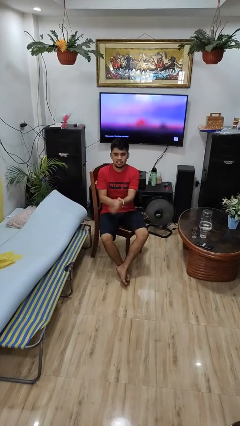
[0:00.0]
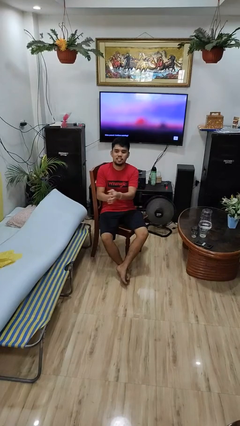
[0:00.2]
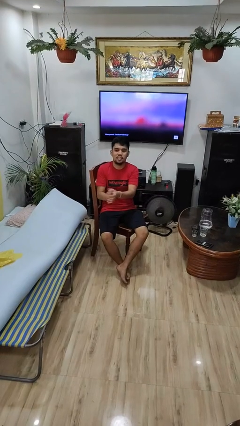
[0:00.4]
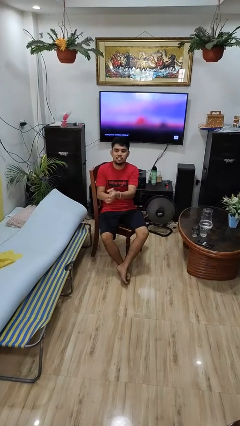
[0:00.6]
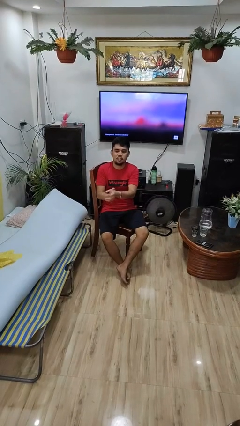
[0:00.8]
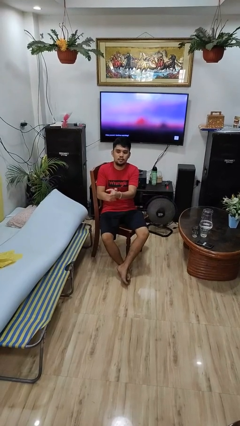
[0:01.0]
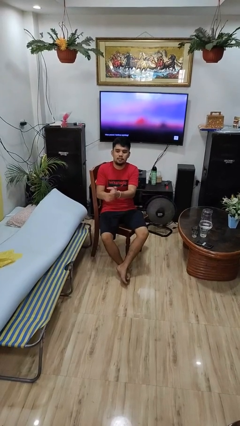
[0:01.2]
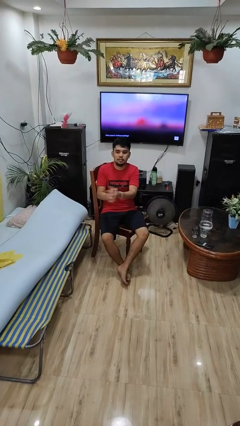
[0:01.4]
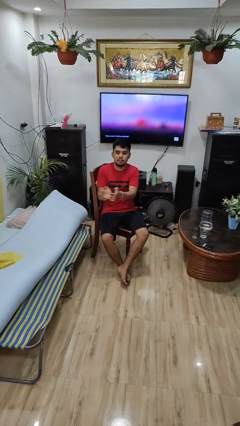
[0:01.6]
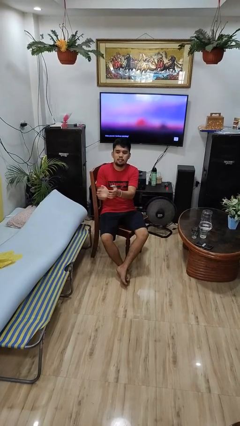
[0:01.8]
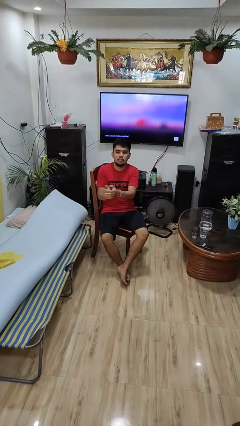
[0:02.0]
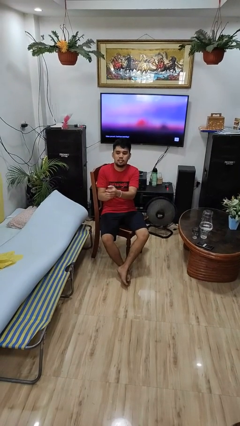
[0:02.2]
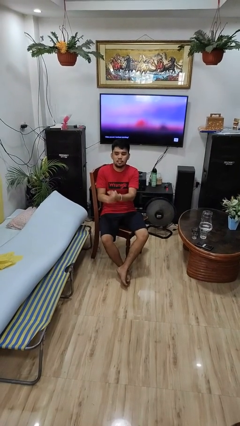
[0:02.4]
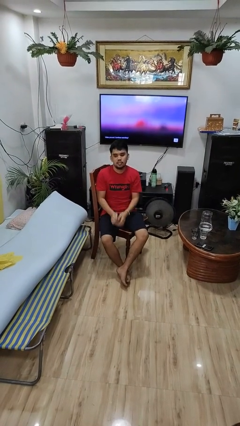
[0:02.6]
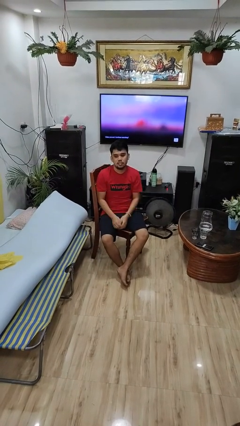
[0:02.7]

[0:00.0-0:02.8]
person claps hands

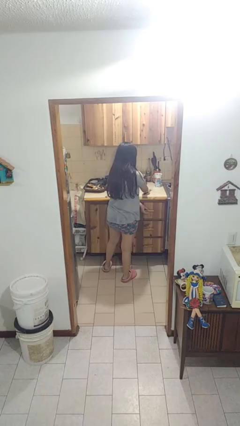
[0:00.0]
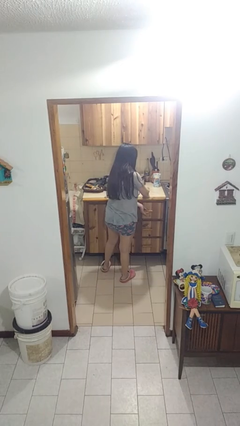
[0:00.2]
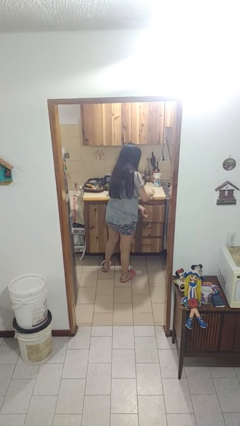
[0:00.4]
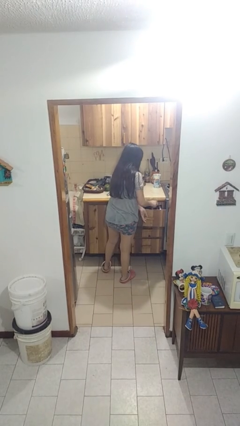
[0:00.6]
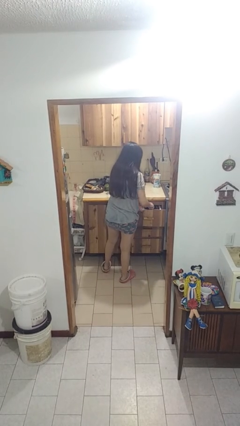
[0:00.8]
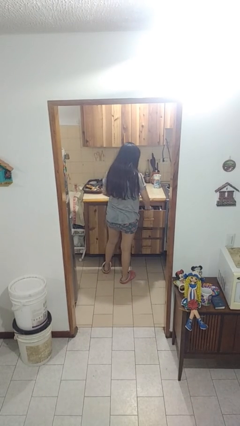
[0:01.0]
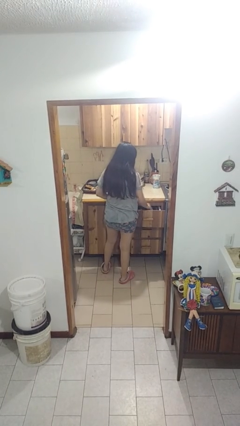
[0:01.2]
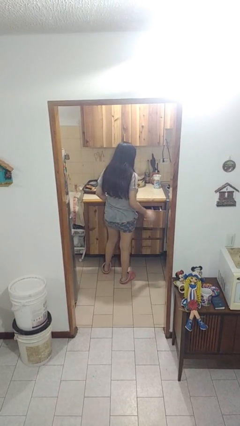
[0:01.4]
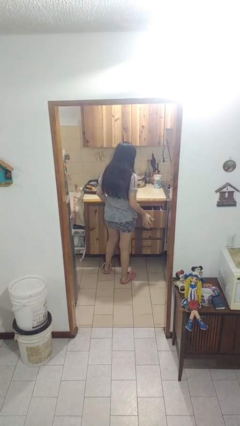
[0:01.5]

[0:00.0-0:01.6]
person puts object into kitchen drawer

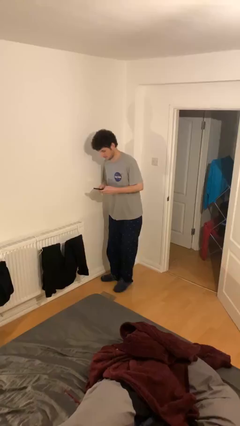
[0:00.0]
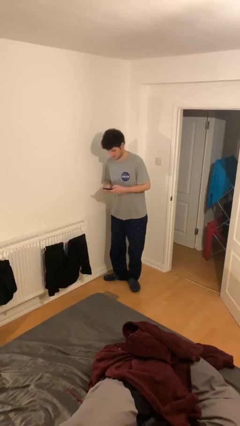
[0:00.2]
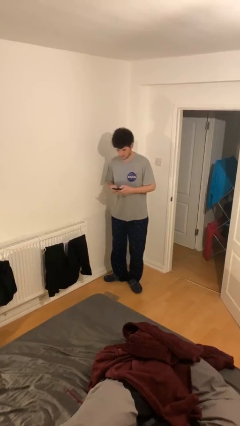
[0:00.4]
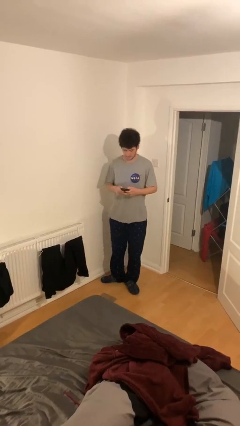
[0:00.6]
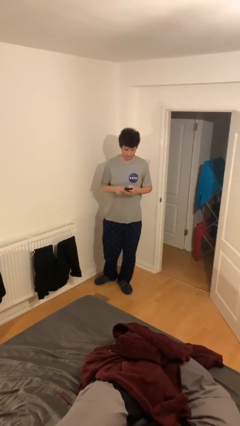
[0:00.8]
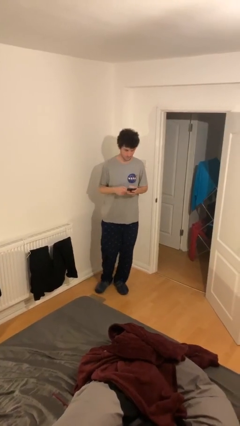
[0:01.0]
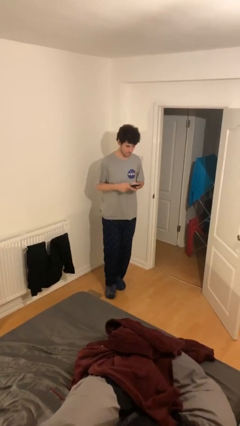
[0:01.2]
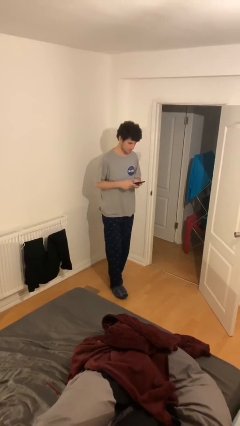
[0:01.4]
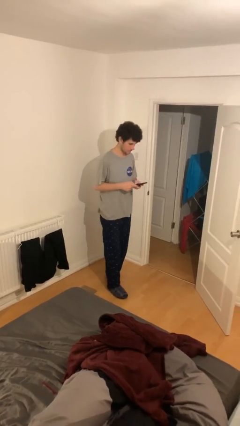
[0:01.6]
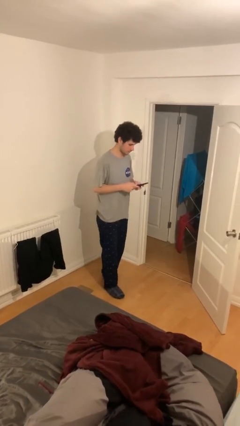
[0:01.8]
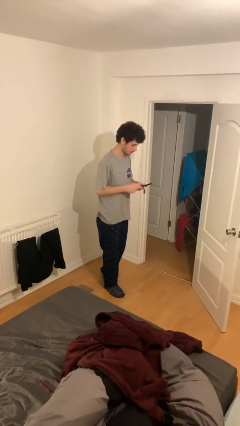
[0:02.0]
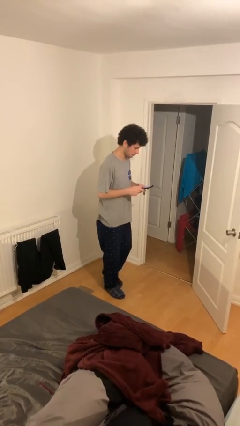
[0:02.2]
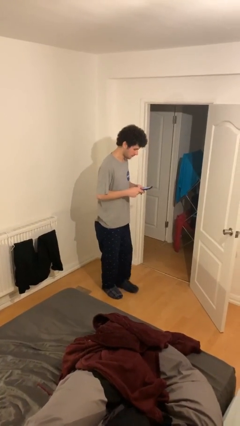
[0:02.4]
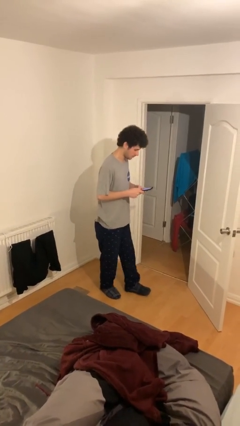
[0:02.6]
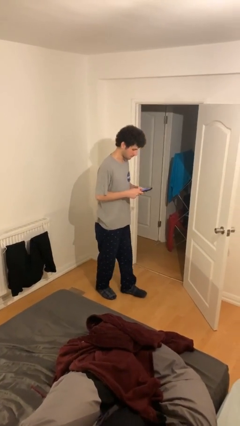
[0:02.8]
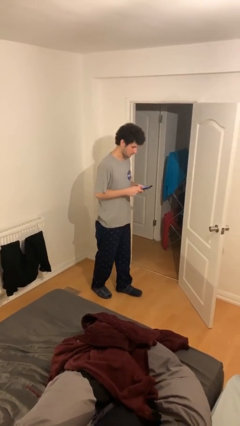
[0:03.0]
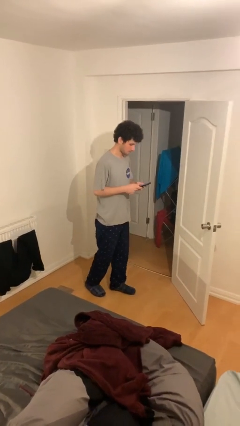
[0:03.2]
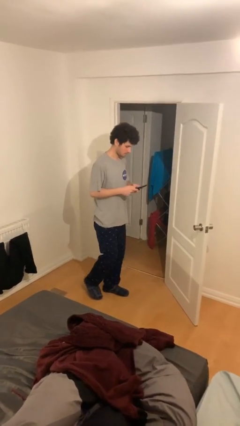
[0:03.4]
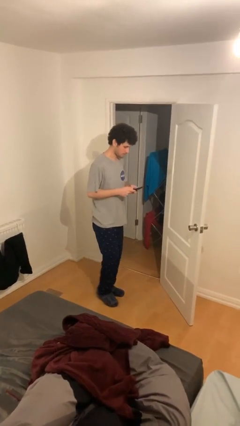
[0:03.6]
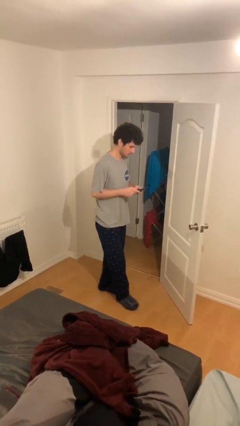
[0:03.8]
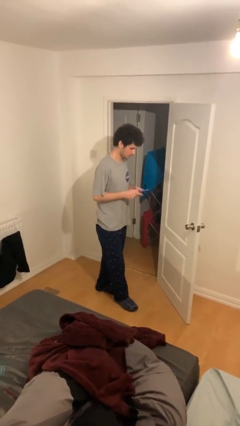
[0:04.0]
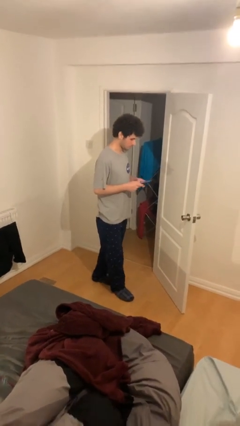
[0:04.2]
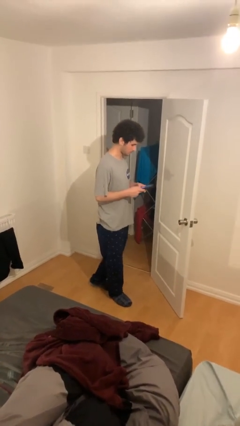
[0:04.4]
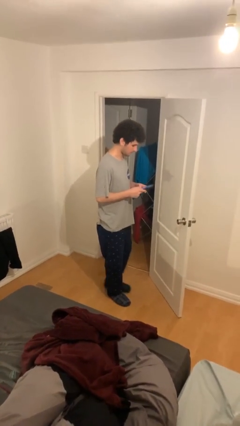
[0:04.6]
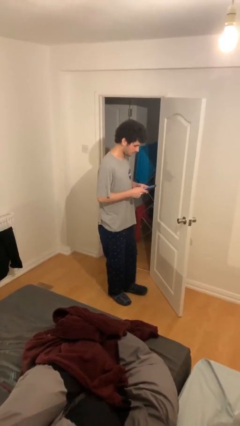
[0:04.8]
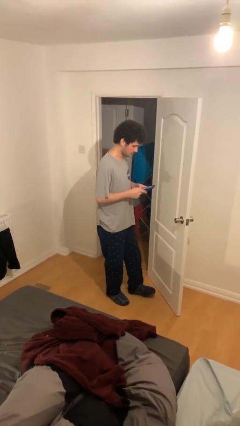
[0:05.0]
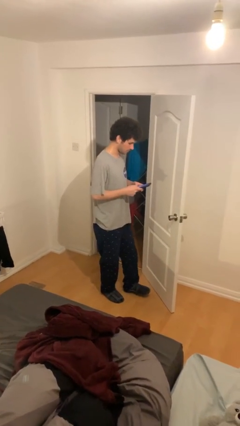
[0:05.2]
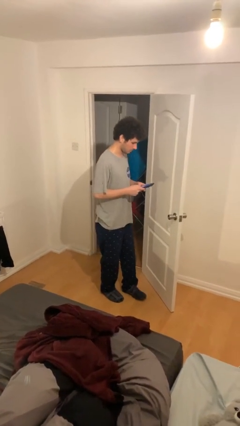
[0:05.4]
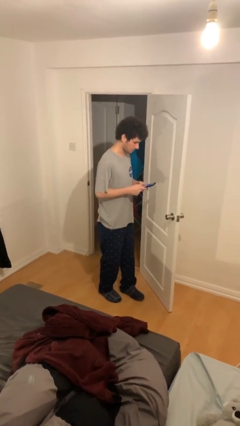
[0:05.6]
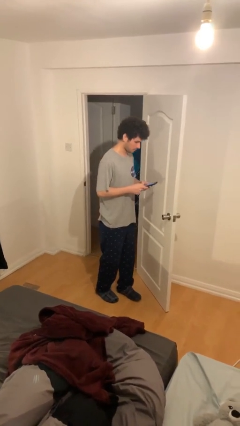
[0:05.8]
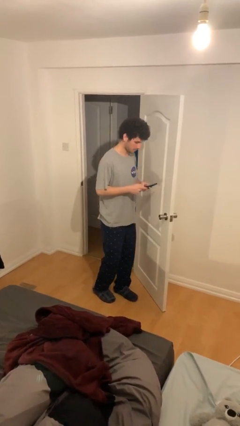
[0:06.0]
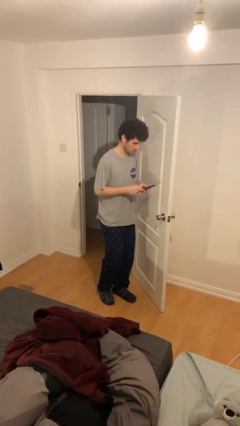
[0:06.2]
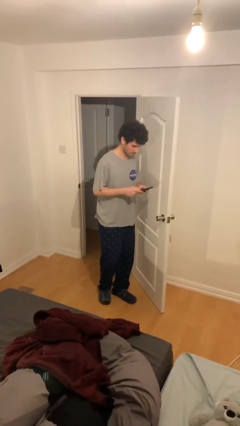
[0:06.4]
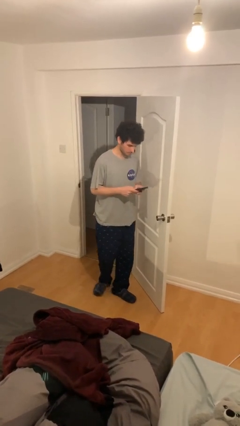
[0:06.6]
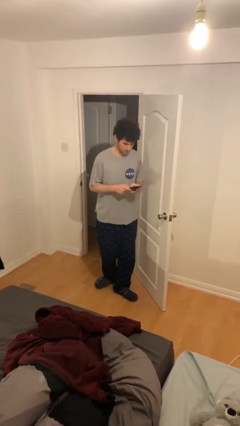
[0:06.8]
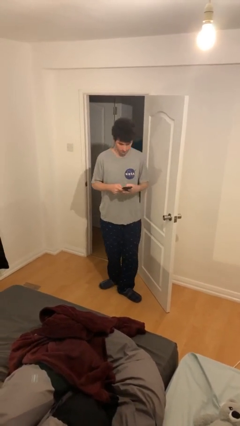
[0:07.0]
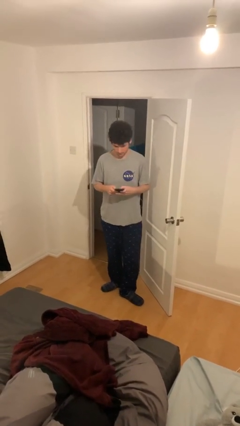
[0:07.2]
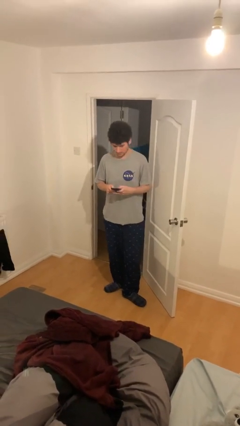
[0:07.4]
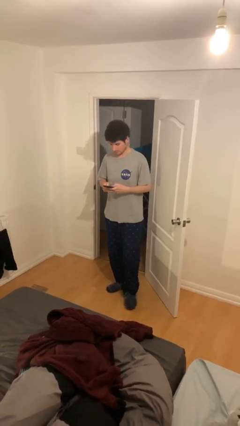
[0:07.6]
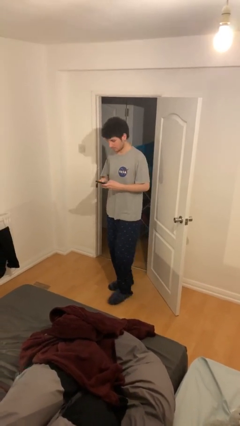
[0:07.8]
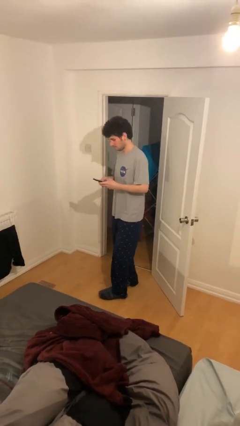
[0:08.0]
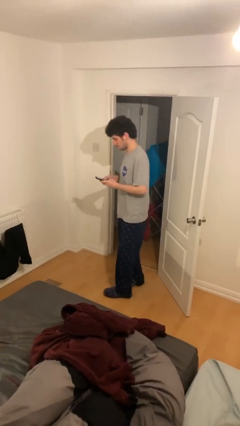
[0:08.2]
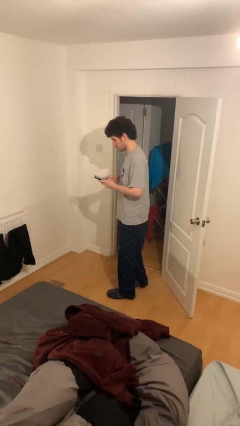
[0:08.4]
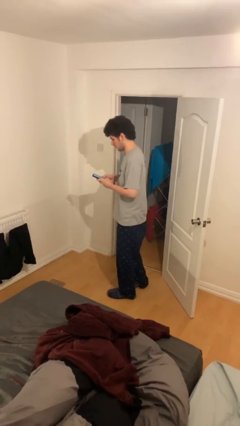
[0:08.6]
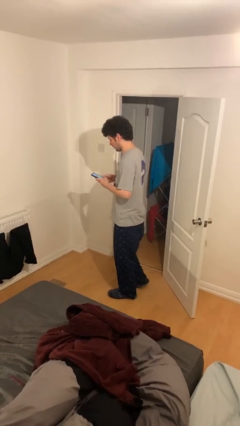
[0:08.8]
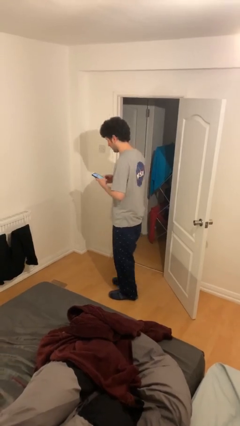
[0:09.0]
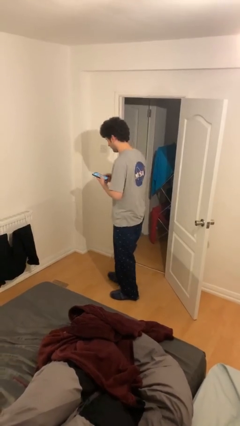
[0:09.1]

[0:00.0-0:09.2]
person texts on phone

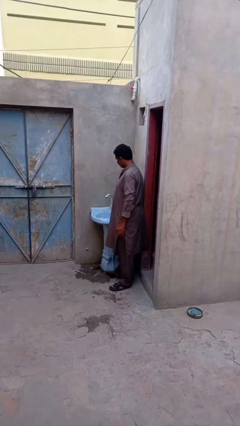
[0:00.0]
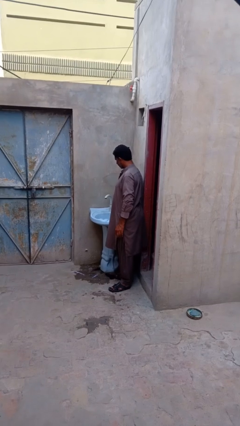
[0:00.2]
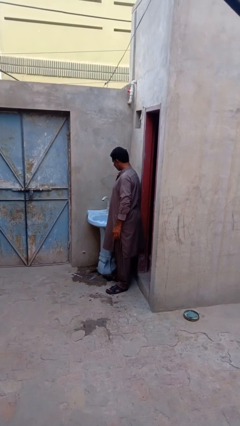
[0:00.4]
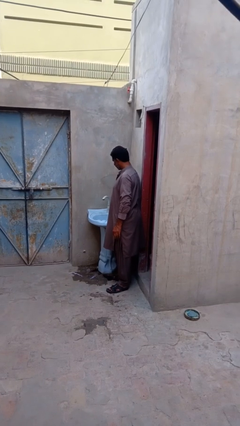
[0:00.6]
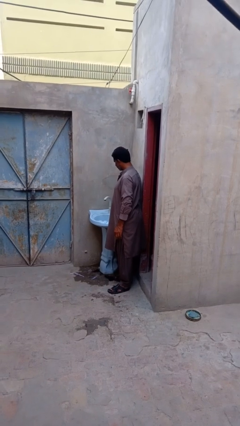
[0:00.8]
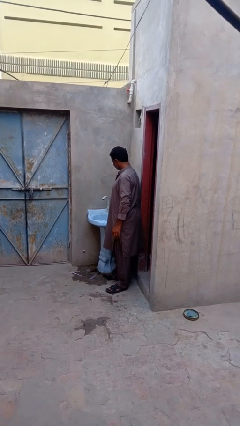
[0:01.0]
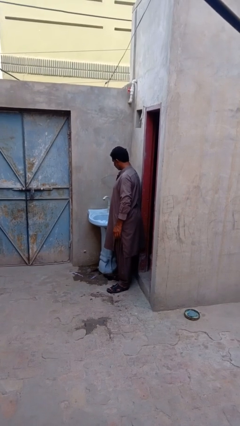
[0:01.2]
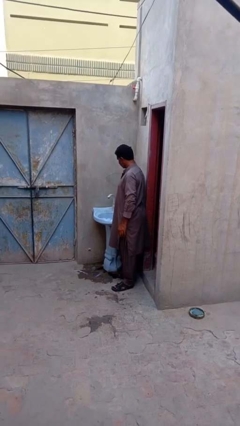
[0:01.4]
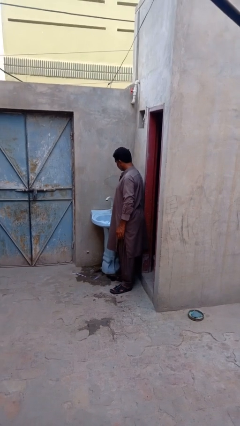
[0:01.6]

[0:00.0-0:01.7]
person turns off faucet

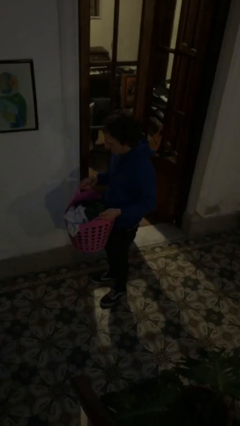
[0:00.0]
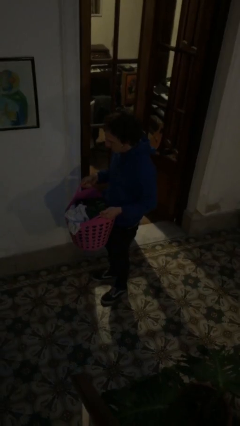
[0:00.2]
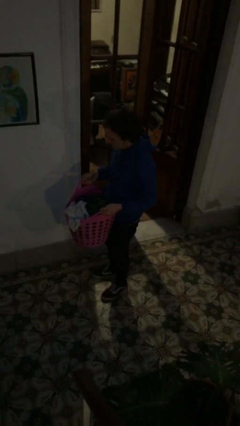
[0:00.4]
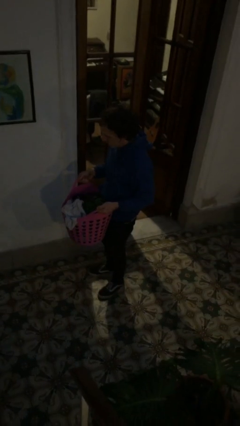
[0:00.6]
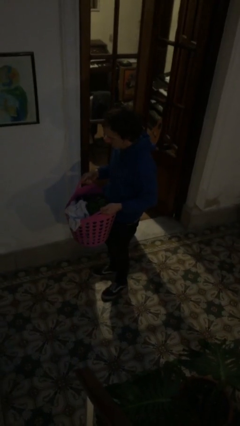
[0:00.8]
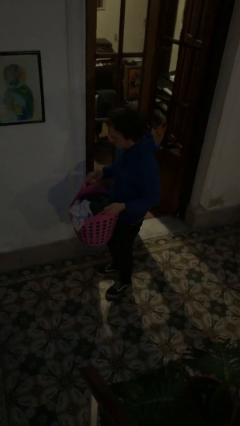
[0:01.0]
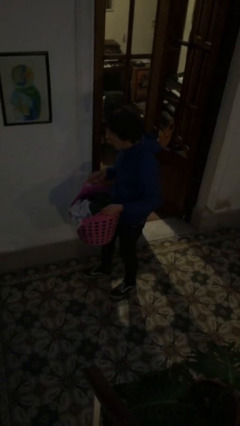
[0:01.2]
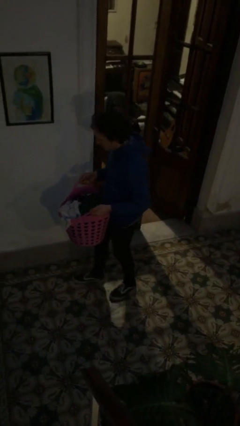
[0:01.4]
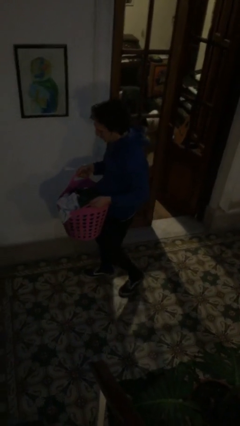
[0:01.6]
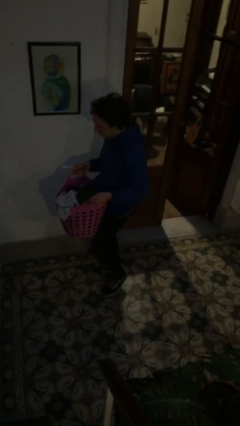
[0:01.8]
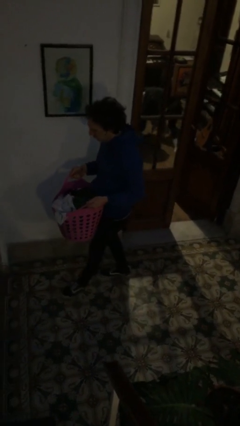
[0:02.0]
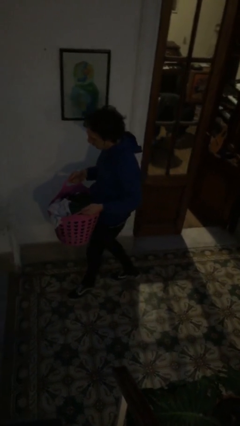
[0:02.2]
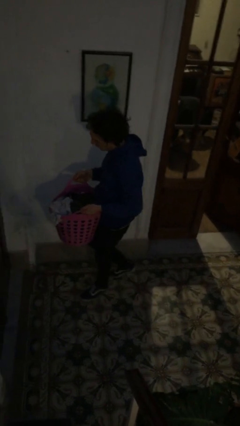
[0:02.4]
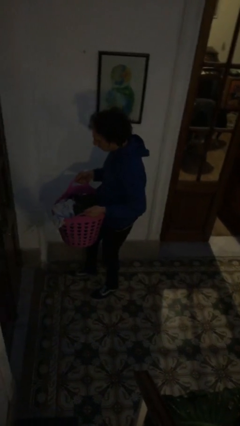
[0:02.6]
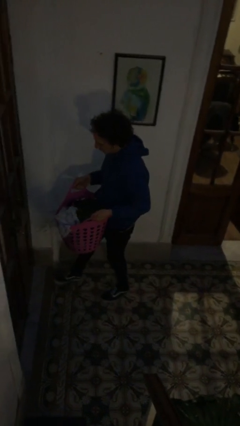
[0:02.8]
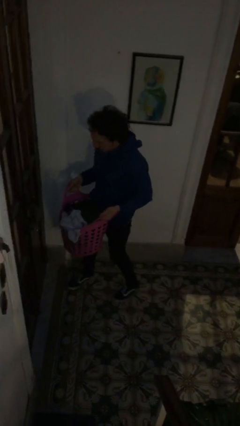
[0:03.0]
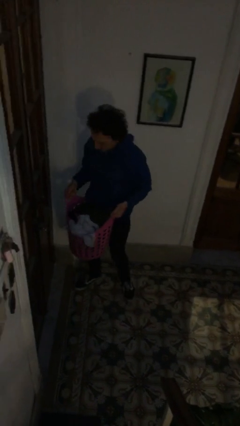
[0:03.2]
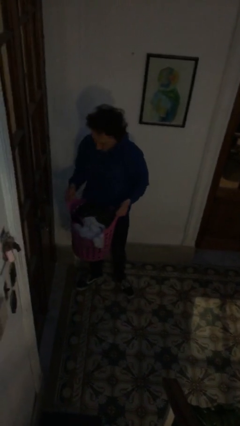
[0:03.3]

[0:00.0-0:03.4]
person carries laundry basket
